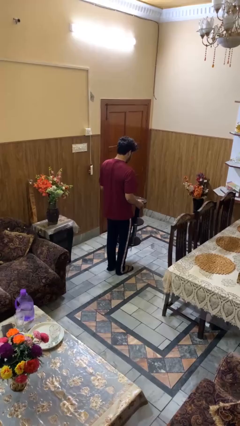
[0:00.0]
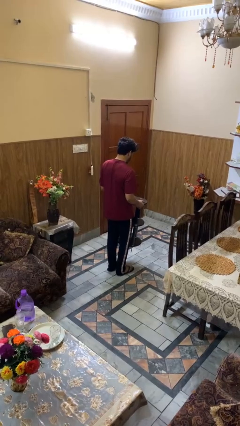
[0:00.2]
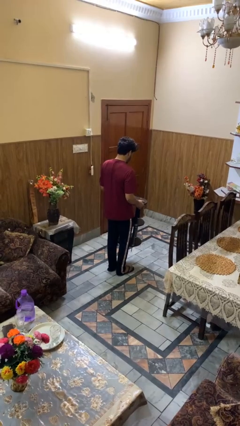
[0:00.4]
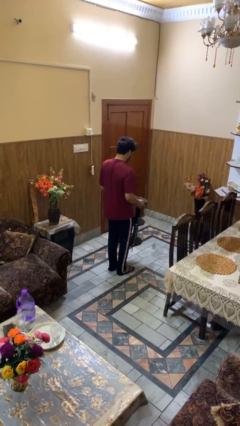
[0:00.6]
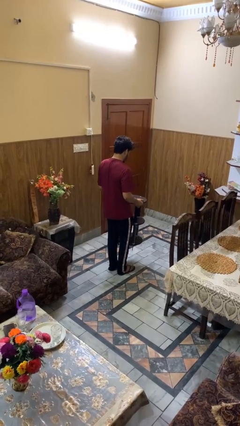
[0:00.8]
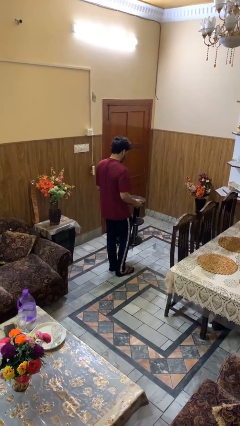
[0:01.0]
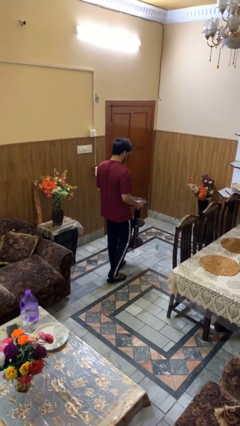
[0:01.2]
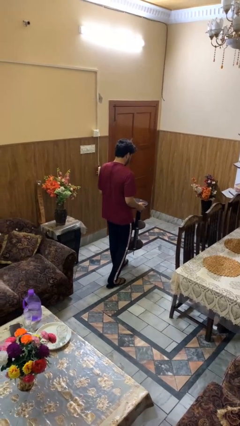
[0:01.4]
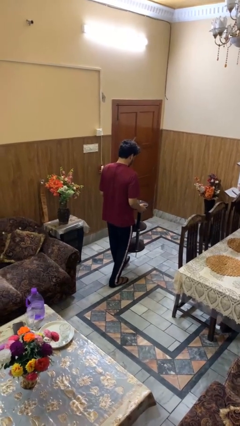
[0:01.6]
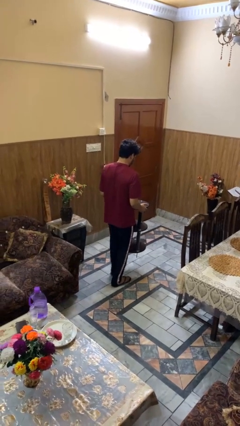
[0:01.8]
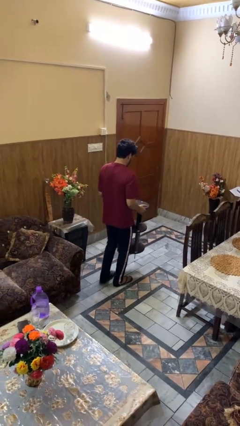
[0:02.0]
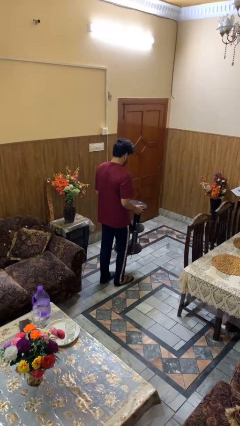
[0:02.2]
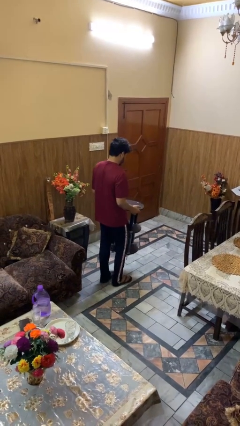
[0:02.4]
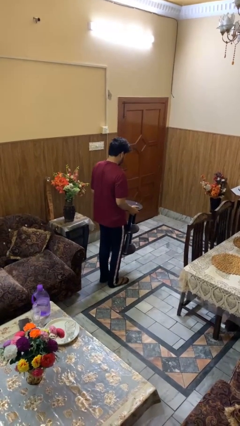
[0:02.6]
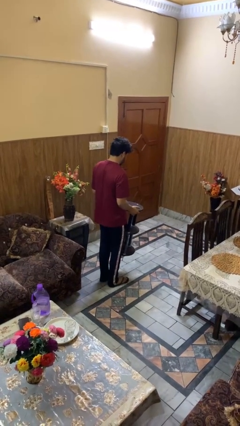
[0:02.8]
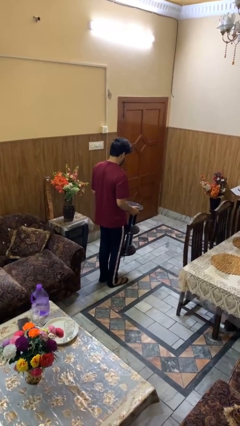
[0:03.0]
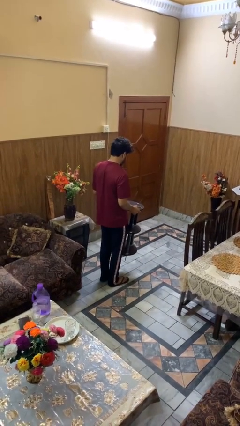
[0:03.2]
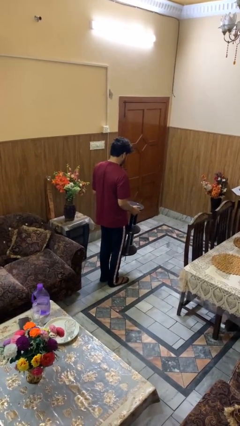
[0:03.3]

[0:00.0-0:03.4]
person carries furniture

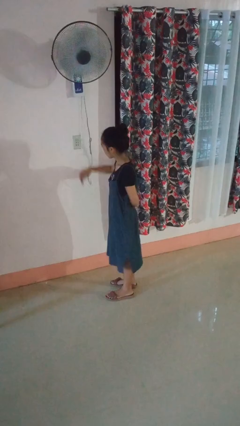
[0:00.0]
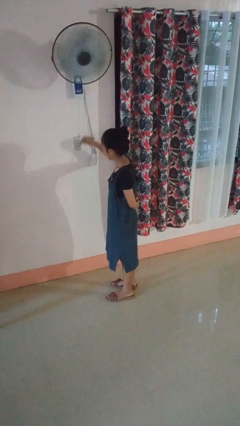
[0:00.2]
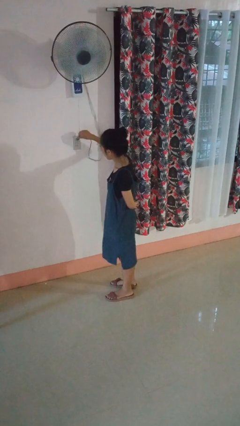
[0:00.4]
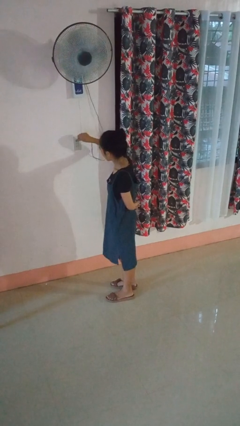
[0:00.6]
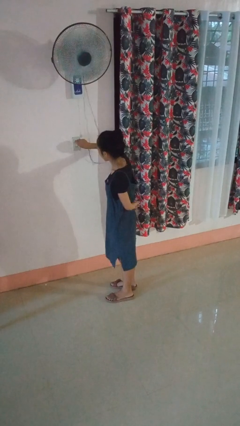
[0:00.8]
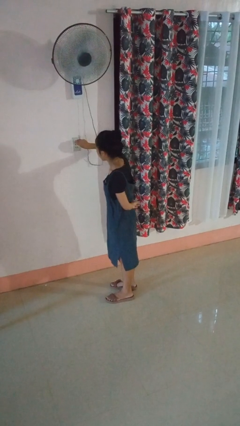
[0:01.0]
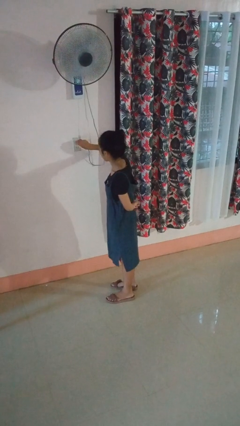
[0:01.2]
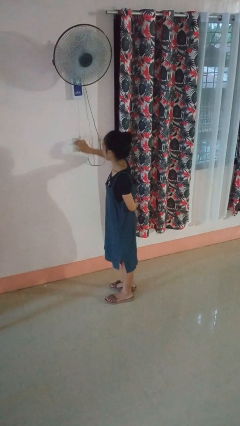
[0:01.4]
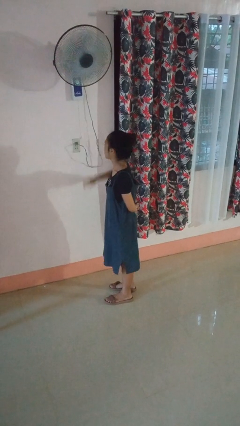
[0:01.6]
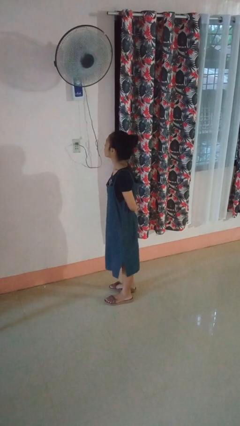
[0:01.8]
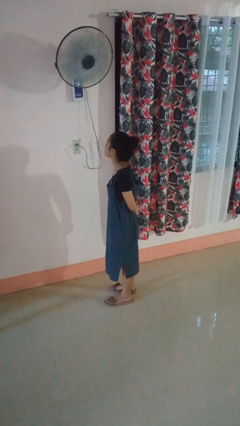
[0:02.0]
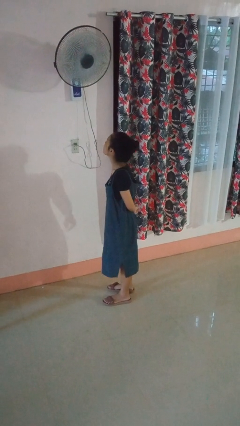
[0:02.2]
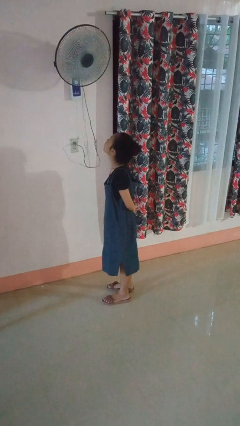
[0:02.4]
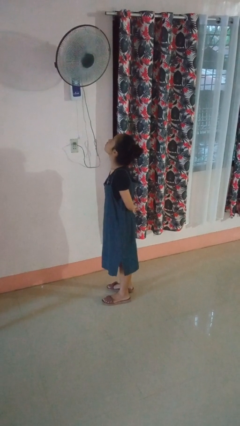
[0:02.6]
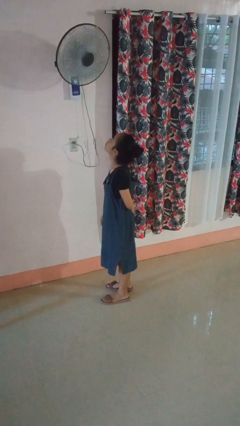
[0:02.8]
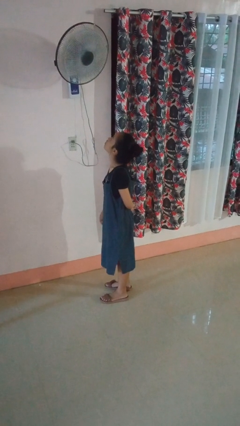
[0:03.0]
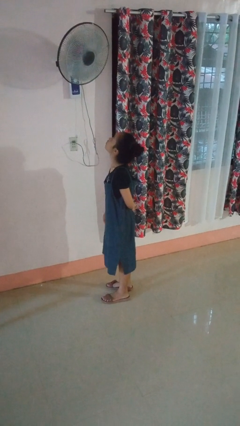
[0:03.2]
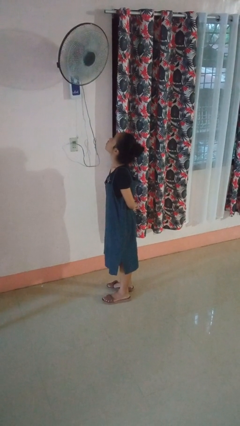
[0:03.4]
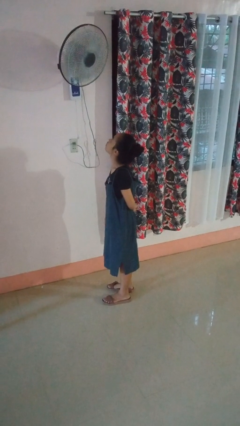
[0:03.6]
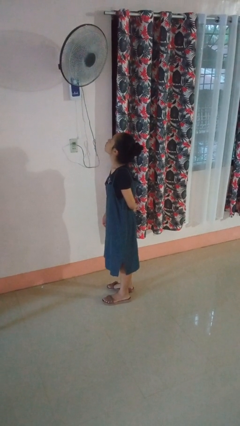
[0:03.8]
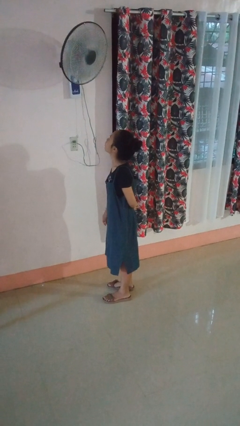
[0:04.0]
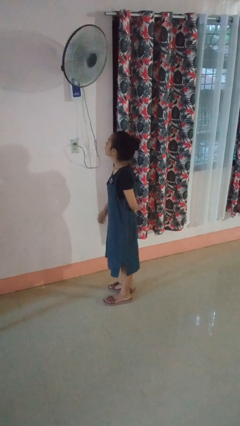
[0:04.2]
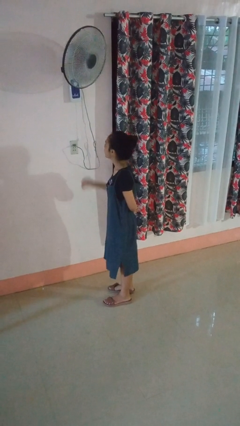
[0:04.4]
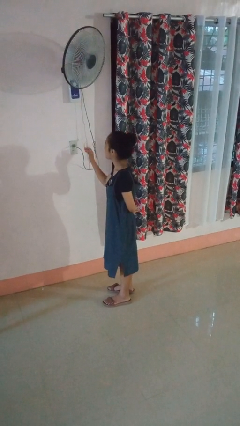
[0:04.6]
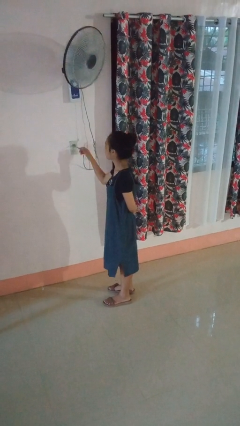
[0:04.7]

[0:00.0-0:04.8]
person plugs into electrical socket

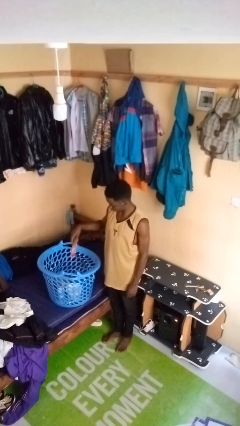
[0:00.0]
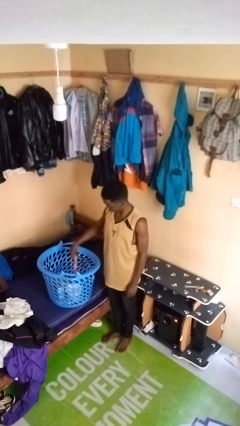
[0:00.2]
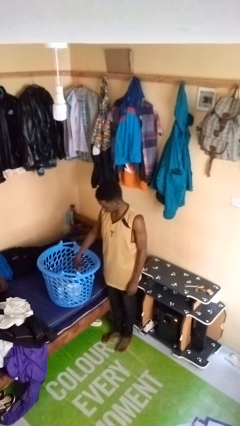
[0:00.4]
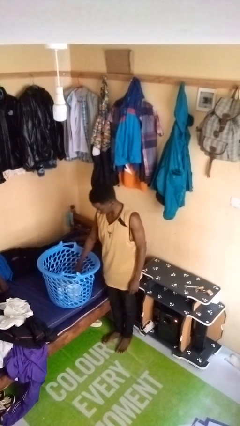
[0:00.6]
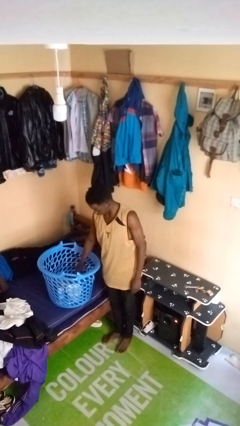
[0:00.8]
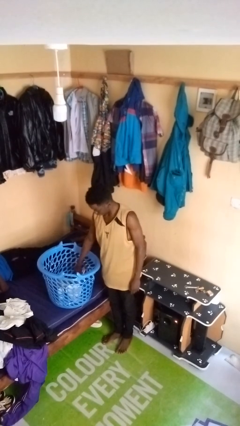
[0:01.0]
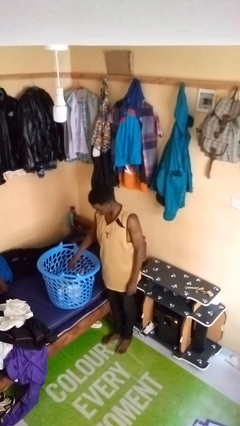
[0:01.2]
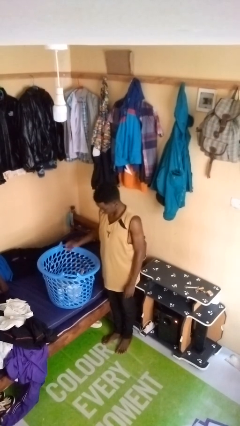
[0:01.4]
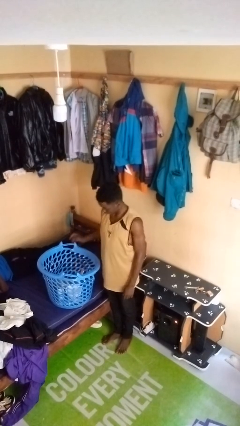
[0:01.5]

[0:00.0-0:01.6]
person puts object into basket

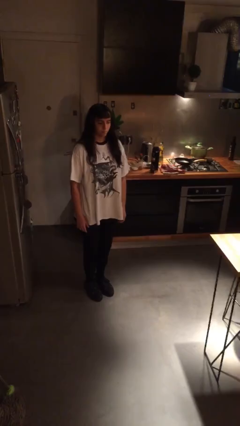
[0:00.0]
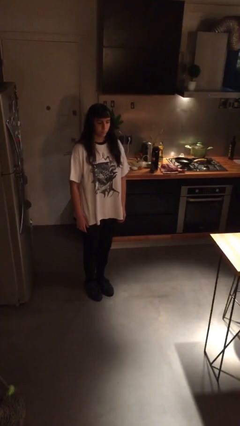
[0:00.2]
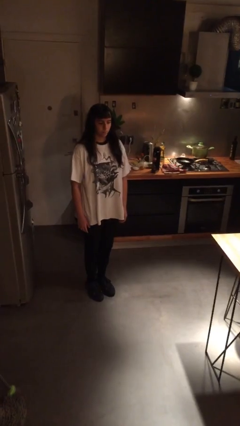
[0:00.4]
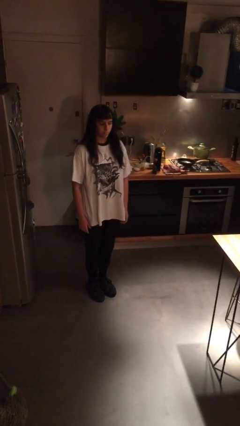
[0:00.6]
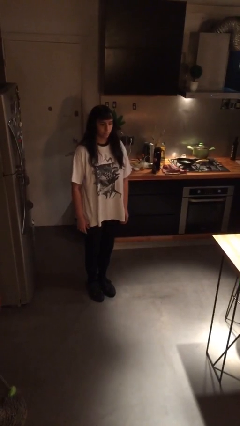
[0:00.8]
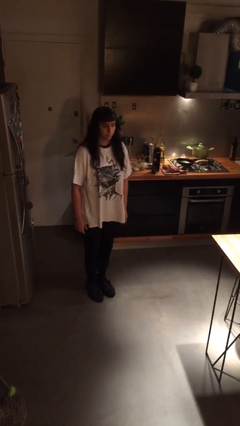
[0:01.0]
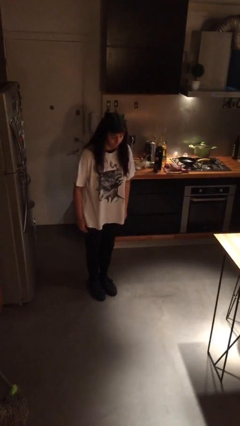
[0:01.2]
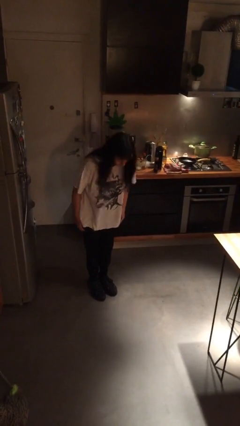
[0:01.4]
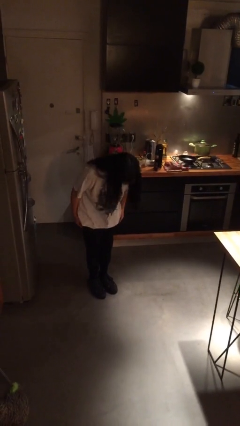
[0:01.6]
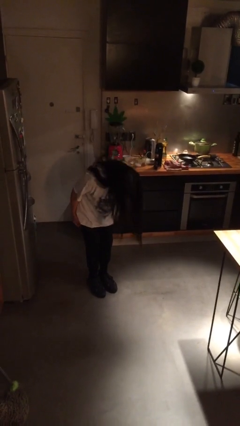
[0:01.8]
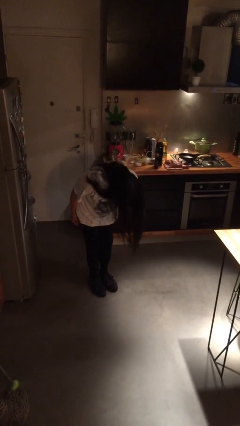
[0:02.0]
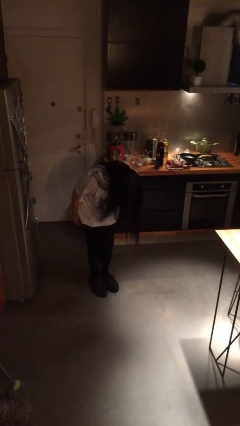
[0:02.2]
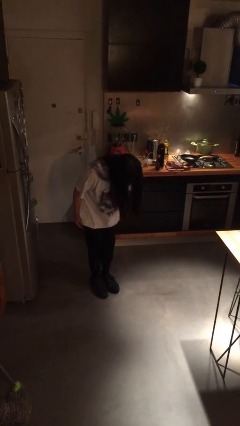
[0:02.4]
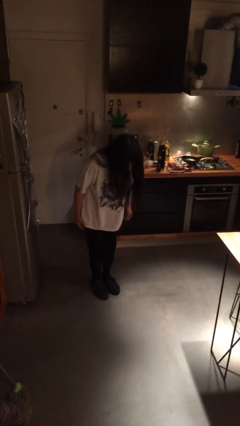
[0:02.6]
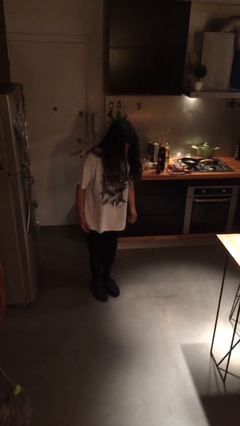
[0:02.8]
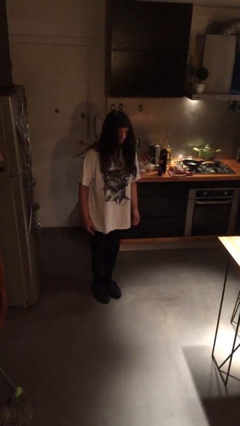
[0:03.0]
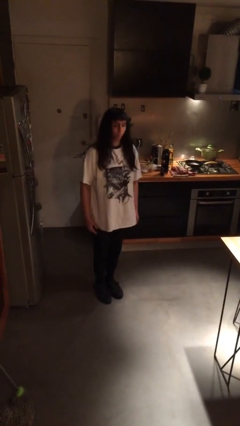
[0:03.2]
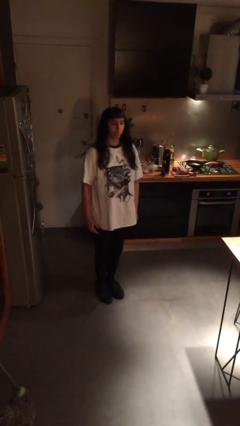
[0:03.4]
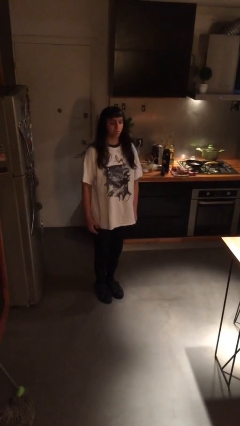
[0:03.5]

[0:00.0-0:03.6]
person bows

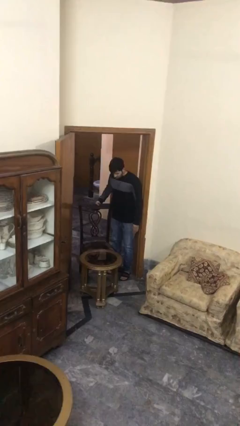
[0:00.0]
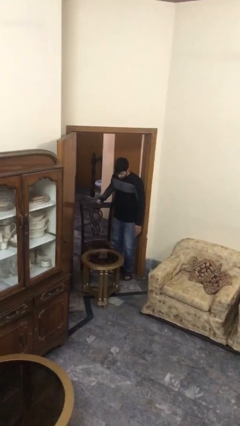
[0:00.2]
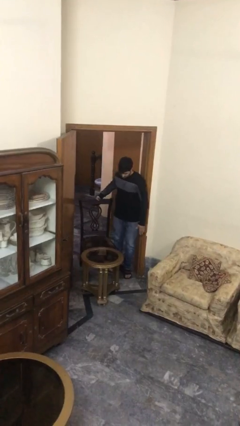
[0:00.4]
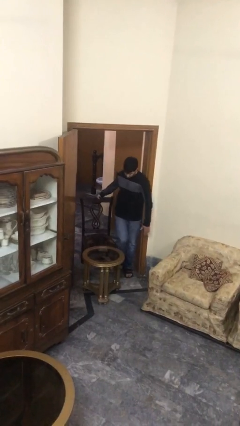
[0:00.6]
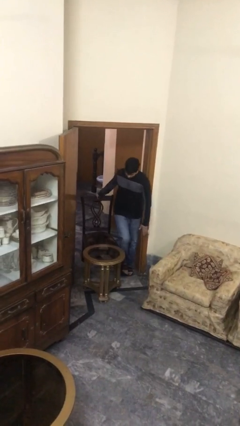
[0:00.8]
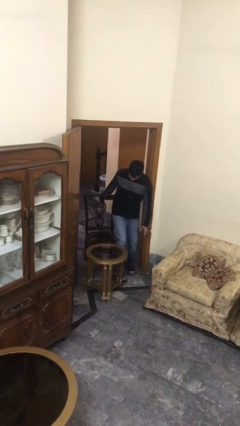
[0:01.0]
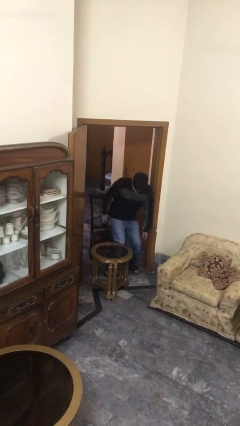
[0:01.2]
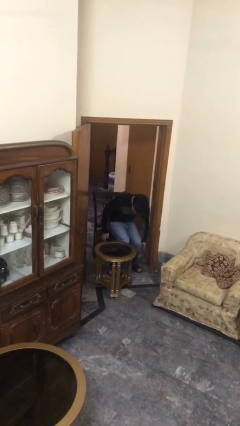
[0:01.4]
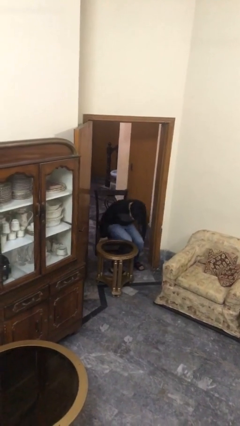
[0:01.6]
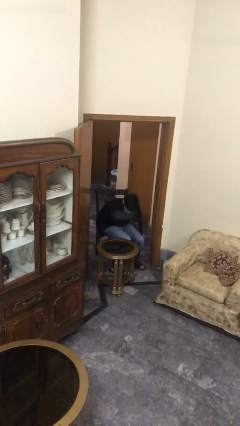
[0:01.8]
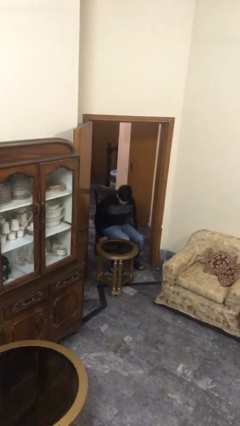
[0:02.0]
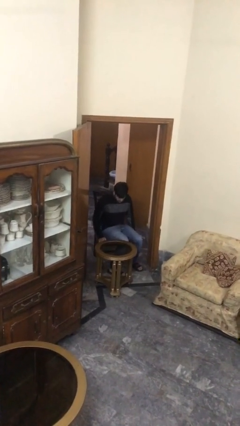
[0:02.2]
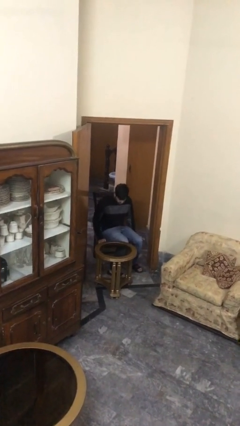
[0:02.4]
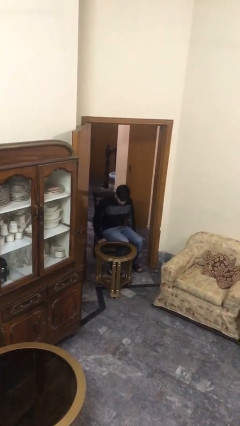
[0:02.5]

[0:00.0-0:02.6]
person sits down

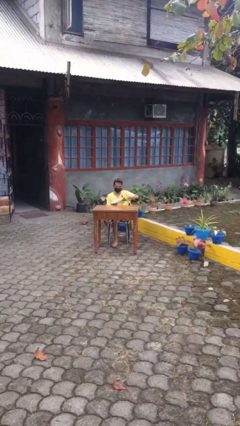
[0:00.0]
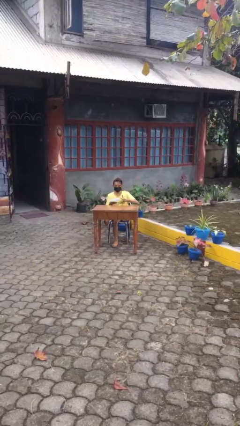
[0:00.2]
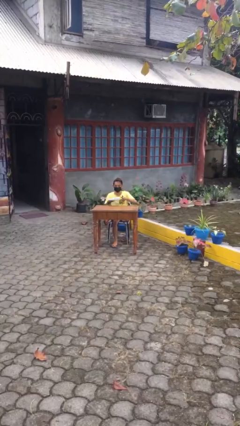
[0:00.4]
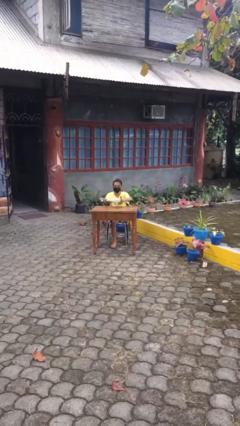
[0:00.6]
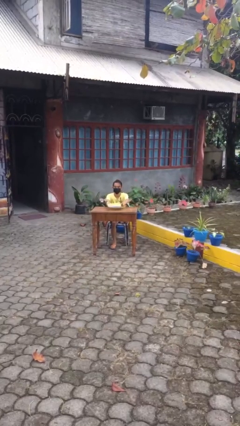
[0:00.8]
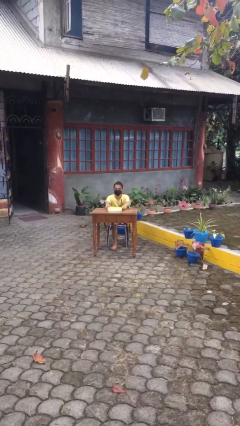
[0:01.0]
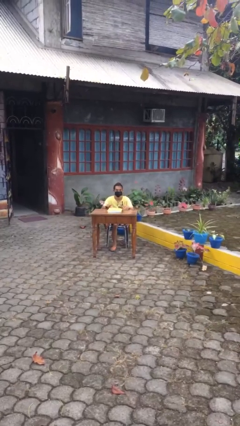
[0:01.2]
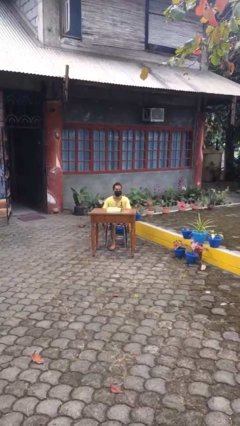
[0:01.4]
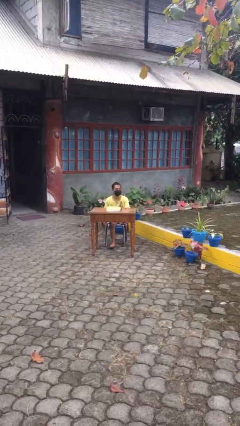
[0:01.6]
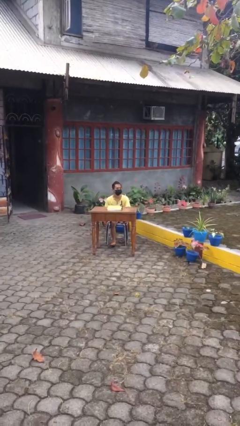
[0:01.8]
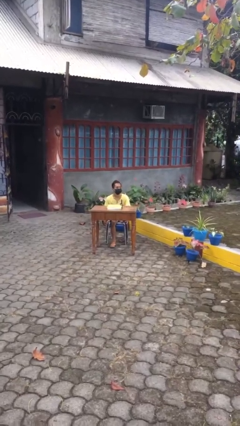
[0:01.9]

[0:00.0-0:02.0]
person puts down object on table
